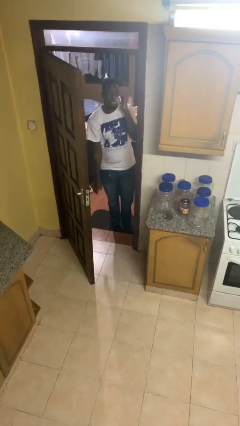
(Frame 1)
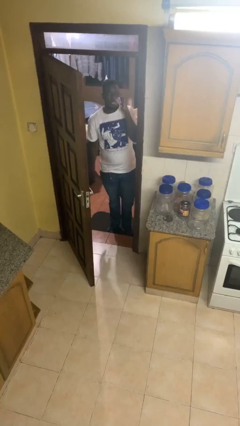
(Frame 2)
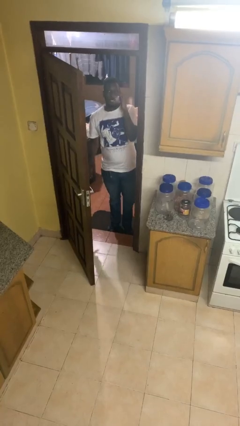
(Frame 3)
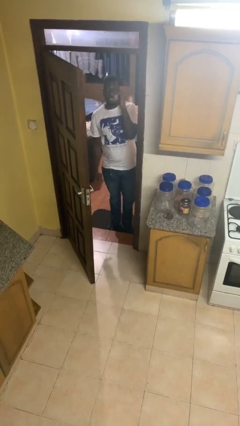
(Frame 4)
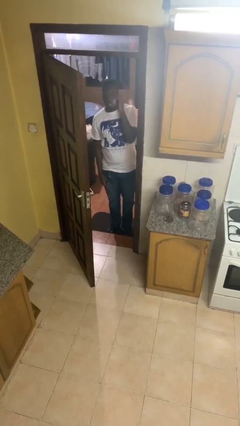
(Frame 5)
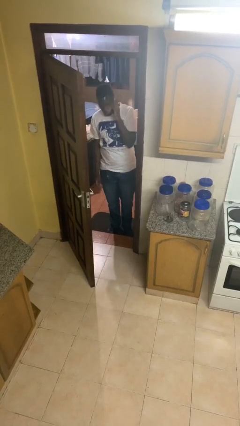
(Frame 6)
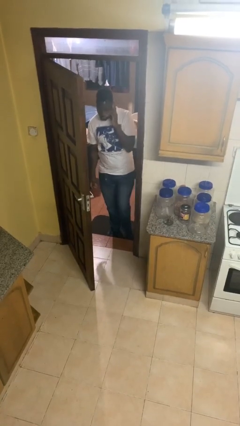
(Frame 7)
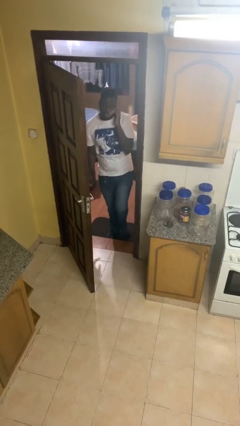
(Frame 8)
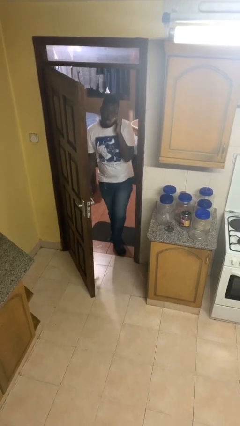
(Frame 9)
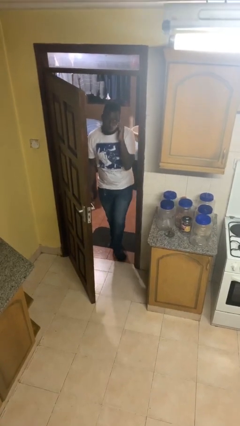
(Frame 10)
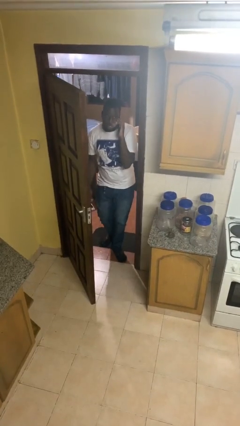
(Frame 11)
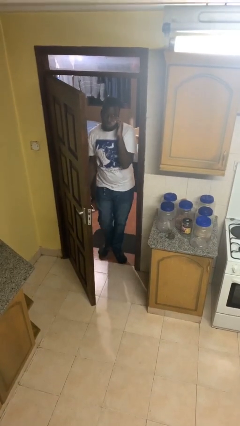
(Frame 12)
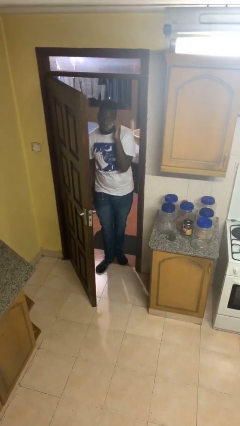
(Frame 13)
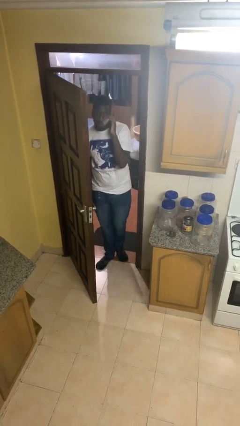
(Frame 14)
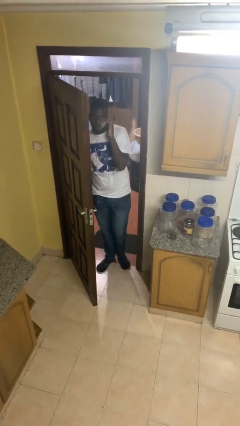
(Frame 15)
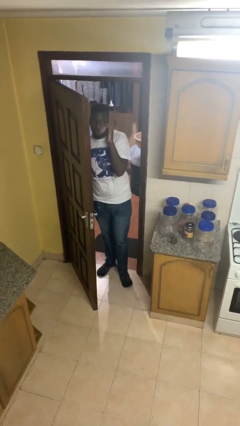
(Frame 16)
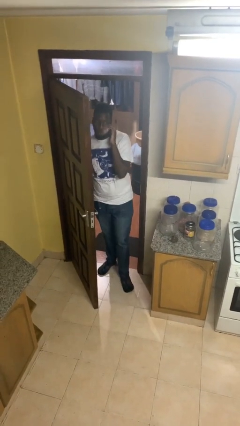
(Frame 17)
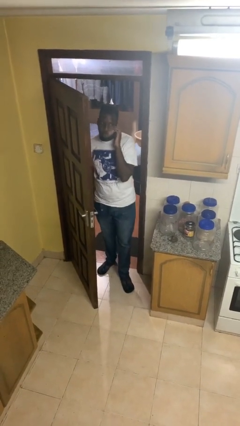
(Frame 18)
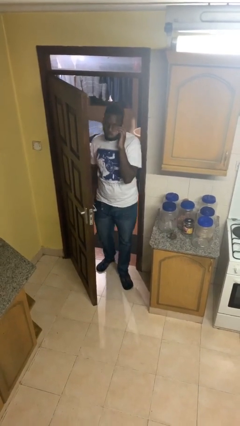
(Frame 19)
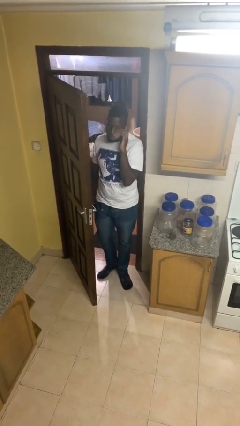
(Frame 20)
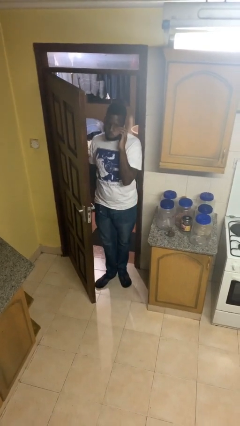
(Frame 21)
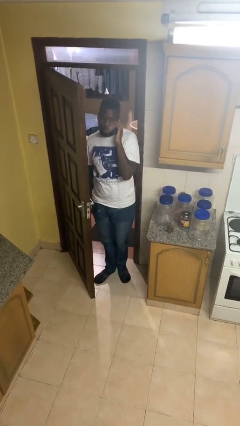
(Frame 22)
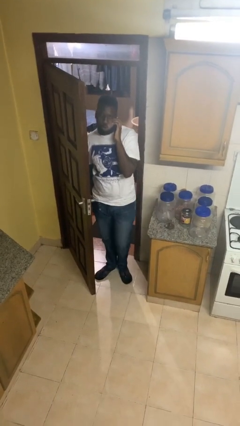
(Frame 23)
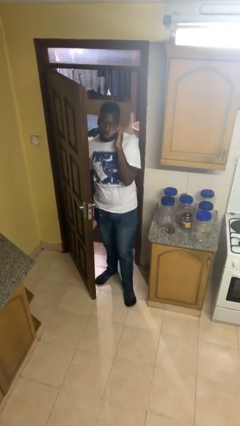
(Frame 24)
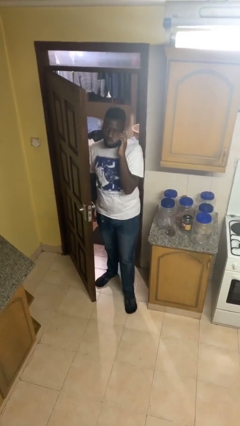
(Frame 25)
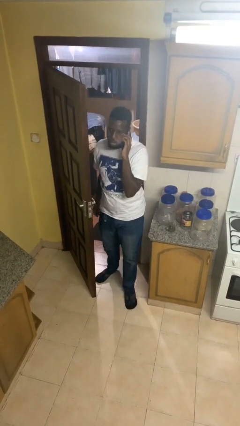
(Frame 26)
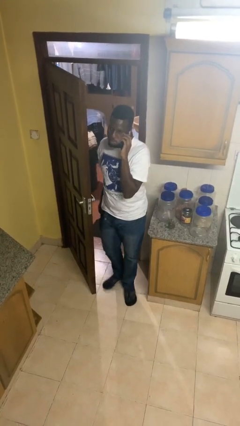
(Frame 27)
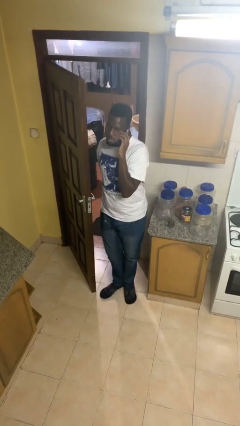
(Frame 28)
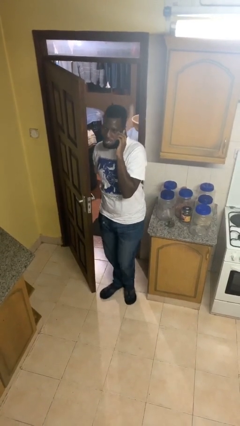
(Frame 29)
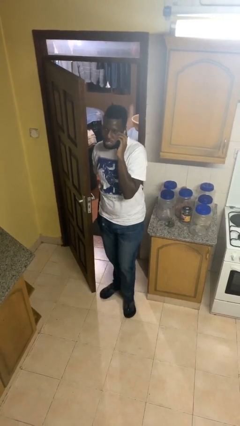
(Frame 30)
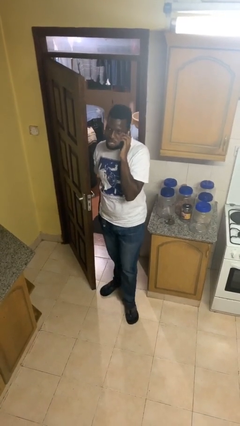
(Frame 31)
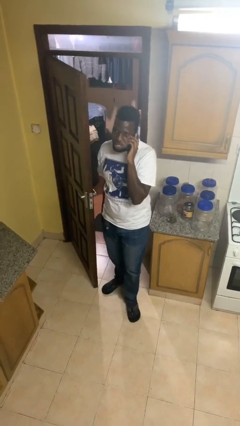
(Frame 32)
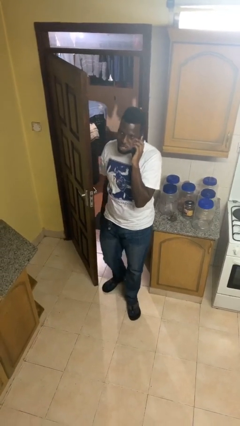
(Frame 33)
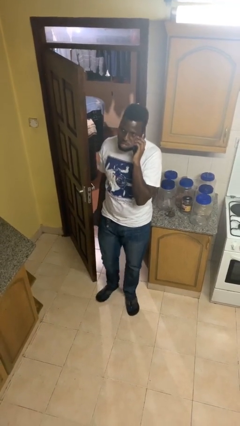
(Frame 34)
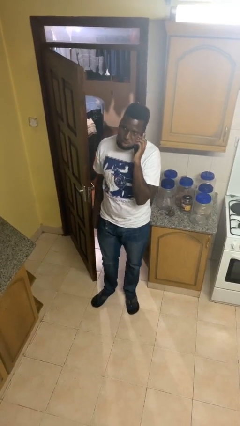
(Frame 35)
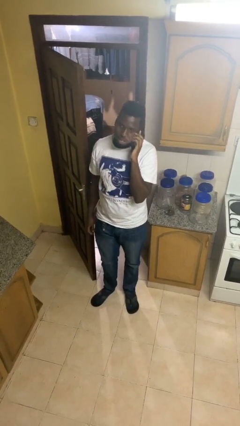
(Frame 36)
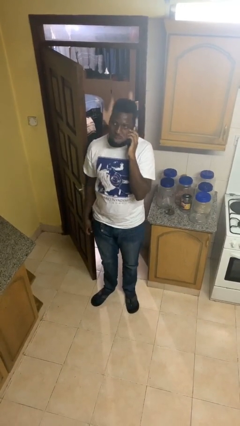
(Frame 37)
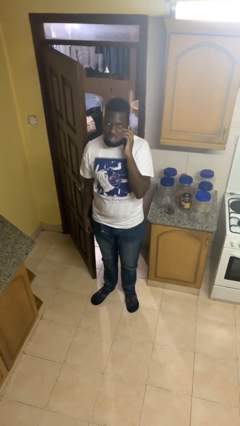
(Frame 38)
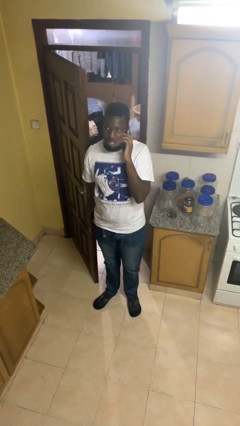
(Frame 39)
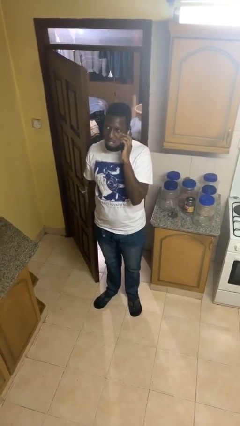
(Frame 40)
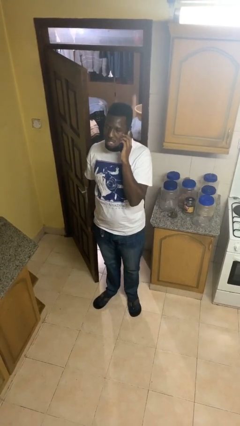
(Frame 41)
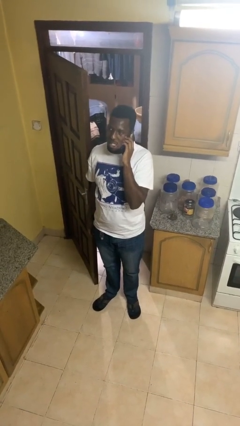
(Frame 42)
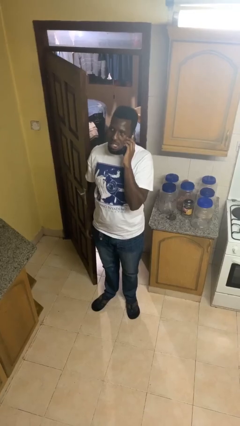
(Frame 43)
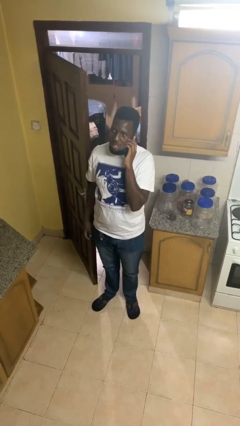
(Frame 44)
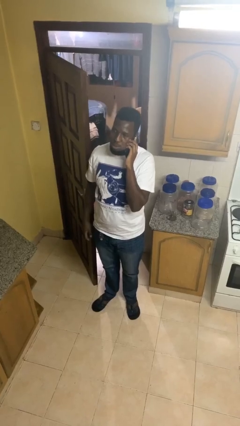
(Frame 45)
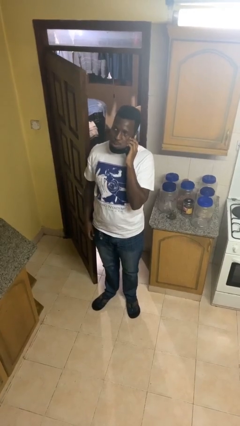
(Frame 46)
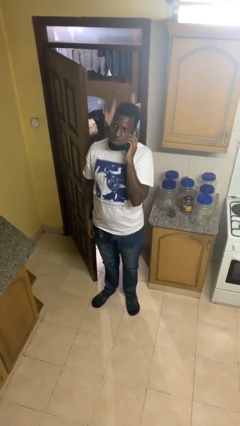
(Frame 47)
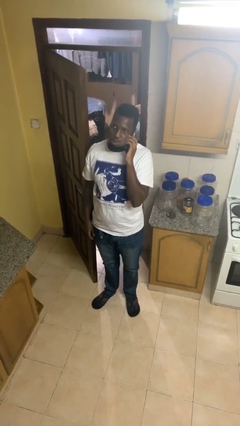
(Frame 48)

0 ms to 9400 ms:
person enters scene through structure

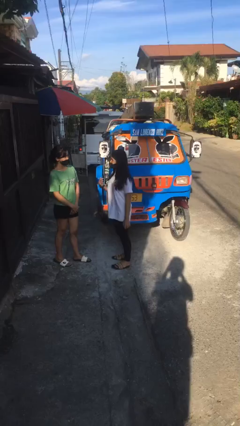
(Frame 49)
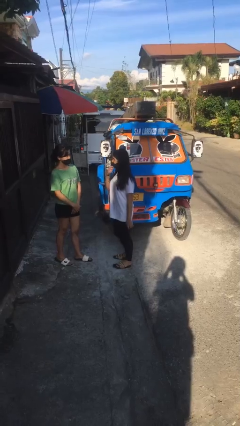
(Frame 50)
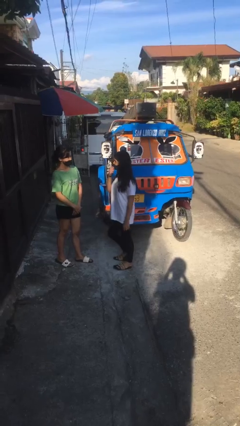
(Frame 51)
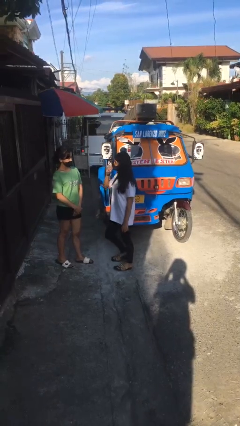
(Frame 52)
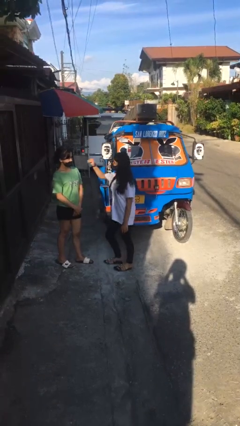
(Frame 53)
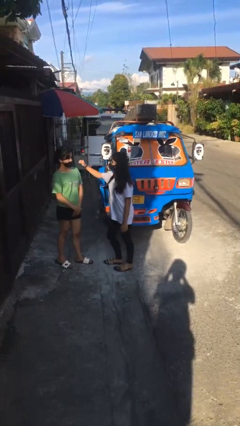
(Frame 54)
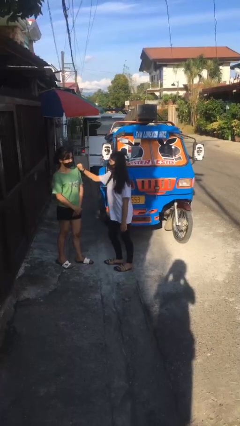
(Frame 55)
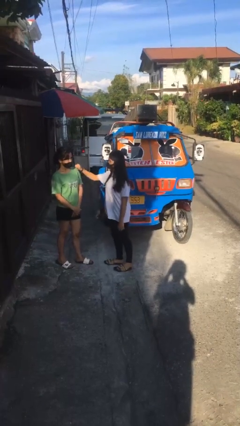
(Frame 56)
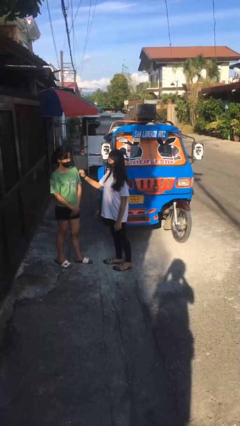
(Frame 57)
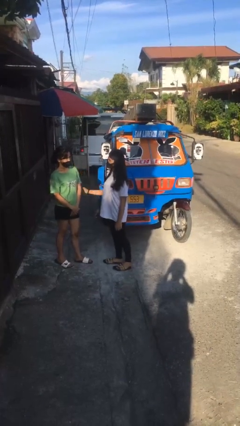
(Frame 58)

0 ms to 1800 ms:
person pounds shoulders of person

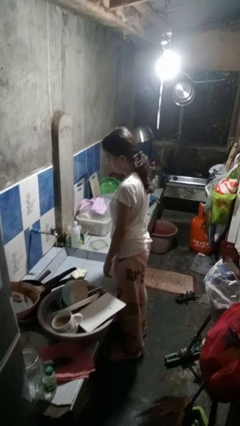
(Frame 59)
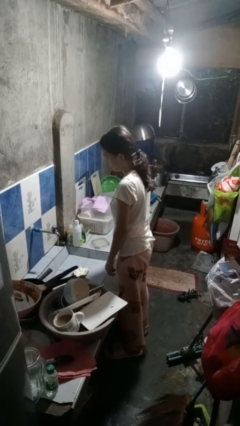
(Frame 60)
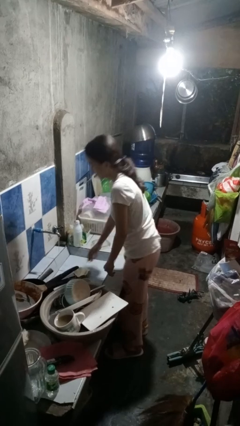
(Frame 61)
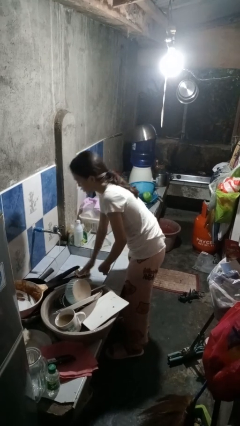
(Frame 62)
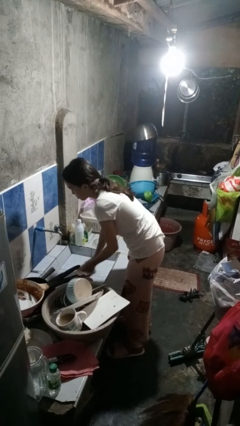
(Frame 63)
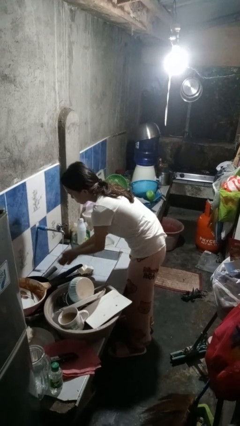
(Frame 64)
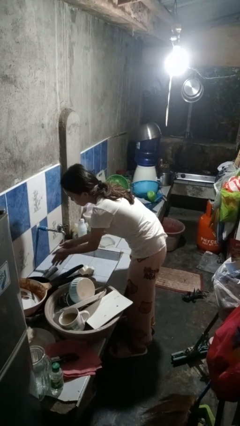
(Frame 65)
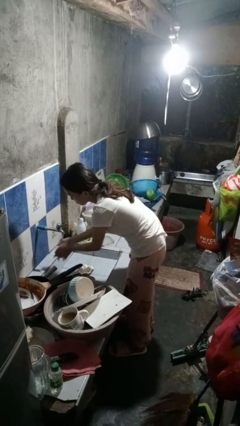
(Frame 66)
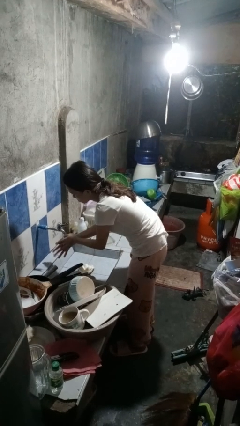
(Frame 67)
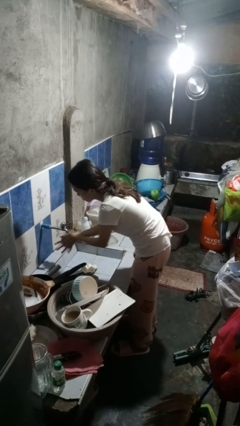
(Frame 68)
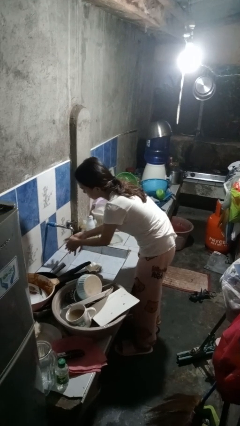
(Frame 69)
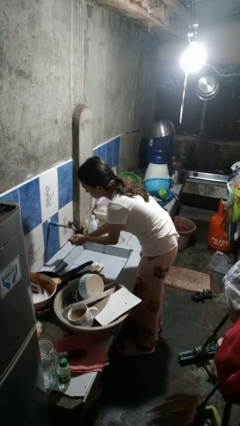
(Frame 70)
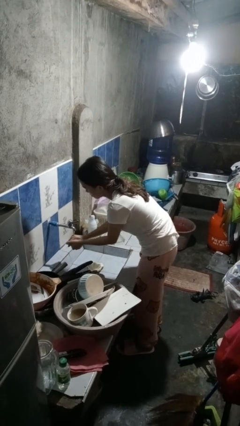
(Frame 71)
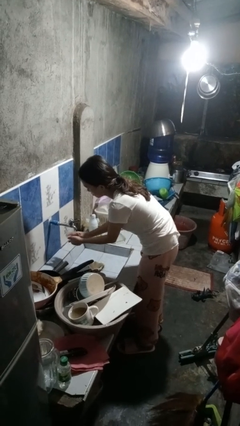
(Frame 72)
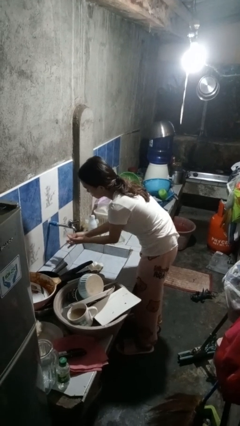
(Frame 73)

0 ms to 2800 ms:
person washes hands

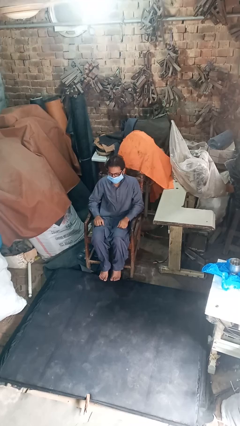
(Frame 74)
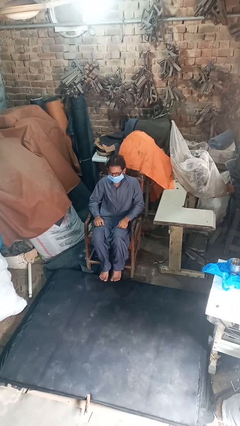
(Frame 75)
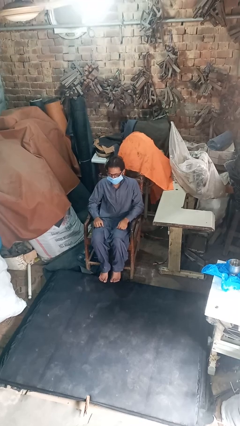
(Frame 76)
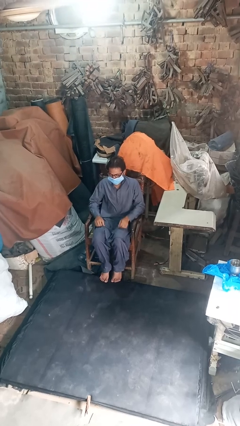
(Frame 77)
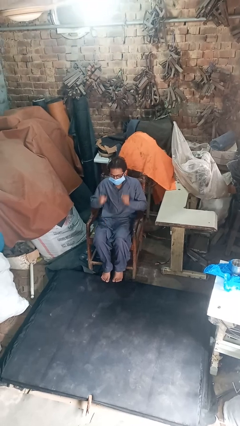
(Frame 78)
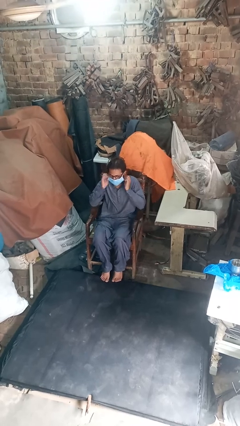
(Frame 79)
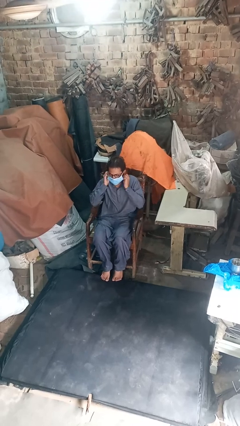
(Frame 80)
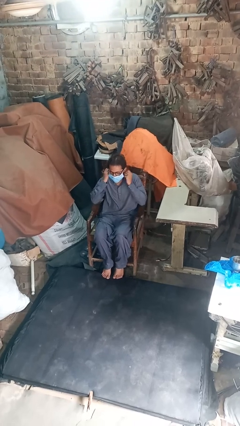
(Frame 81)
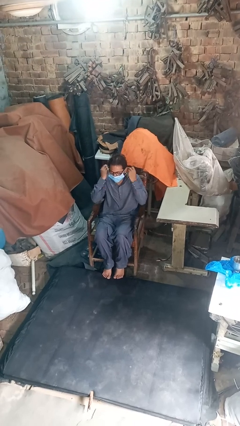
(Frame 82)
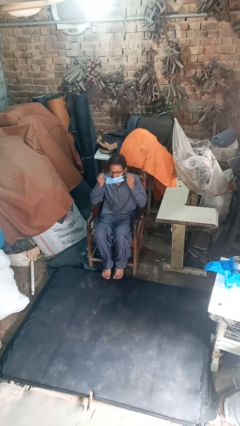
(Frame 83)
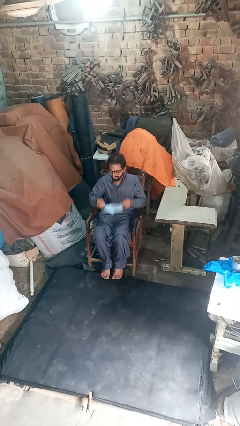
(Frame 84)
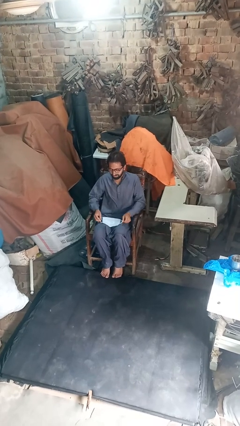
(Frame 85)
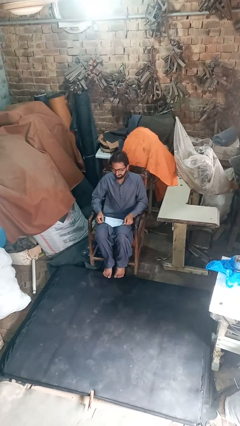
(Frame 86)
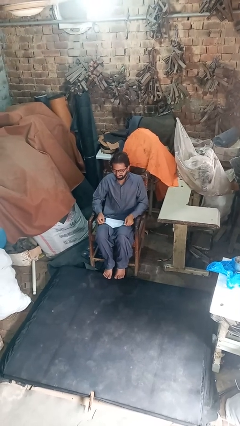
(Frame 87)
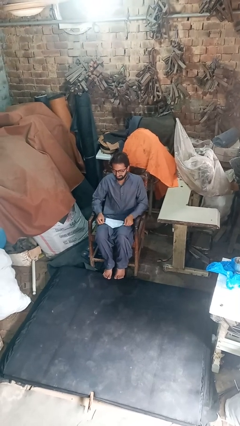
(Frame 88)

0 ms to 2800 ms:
person takes off facemask

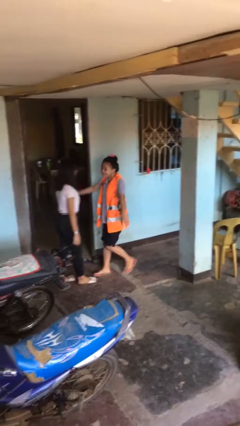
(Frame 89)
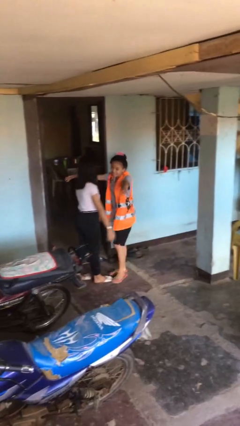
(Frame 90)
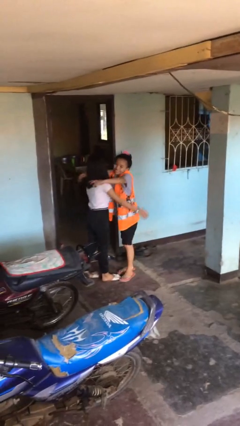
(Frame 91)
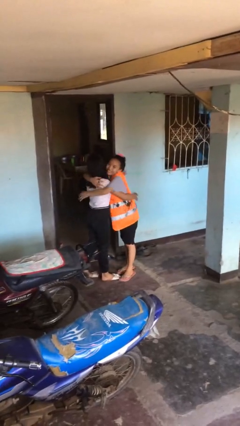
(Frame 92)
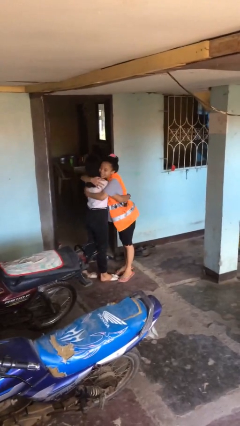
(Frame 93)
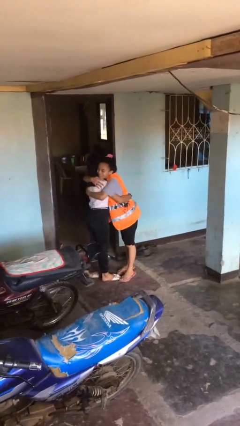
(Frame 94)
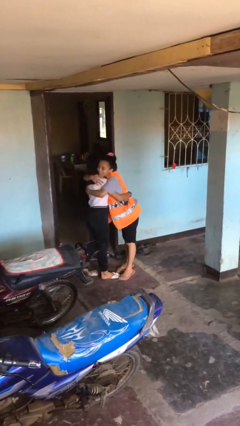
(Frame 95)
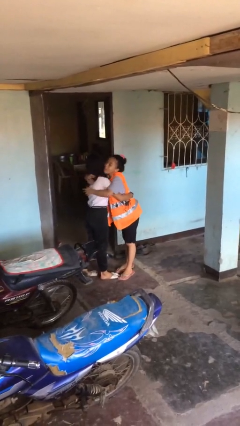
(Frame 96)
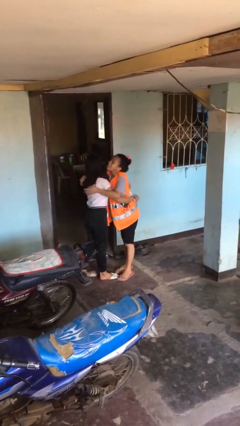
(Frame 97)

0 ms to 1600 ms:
person embraces person
